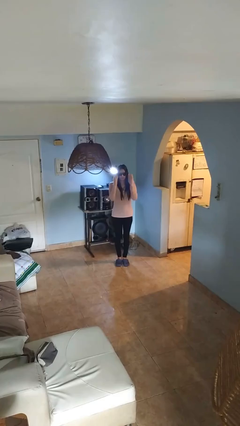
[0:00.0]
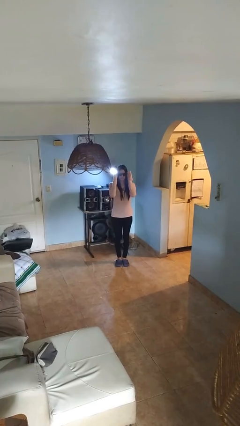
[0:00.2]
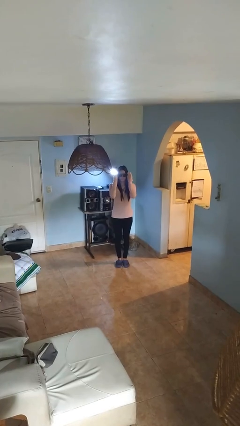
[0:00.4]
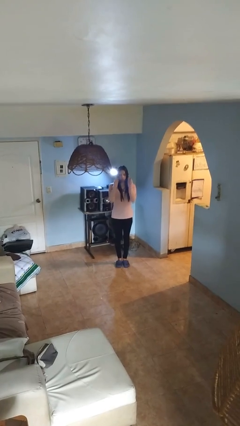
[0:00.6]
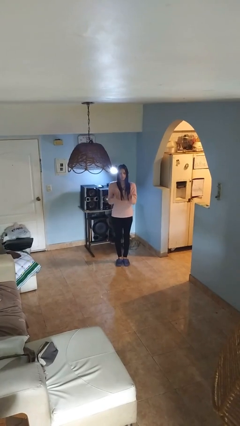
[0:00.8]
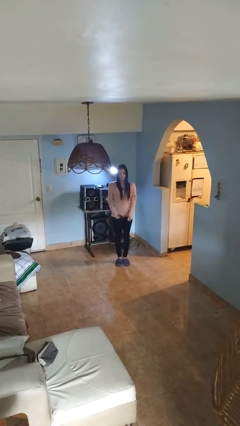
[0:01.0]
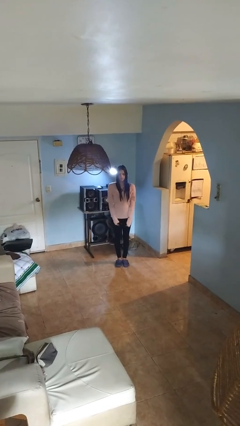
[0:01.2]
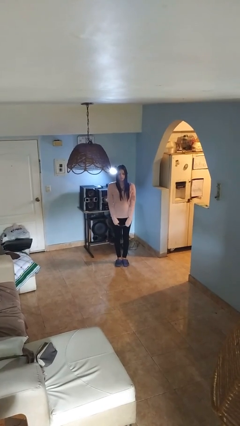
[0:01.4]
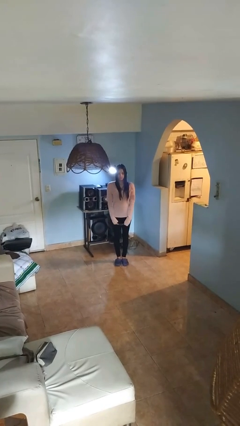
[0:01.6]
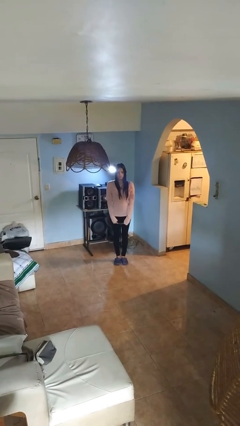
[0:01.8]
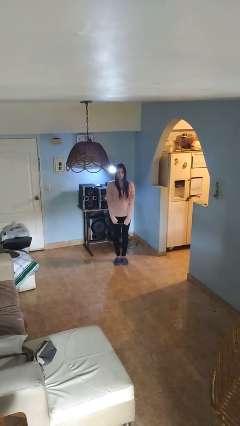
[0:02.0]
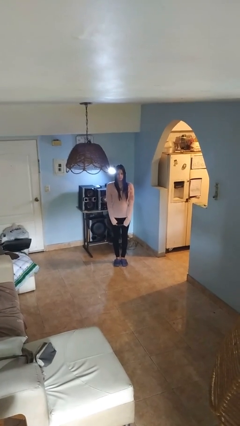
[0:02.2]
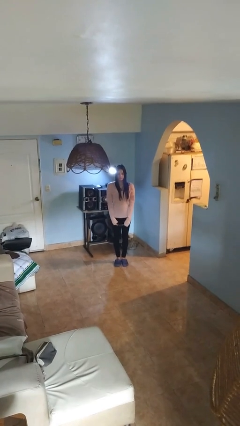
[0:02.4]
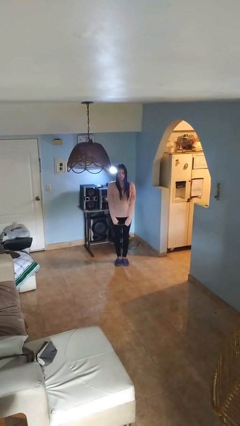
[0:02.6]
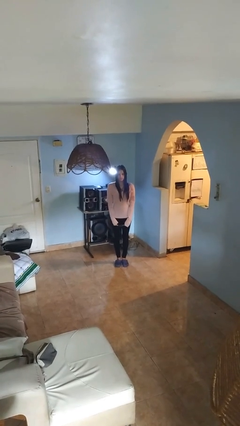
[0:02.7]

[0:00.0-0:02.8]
person takes off sunglasses

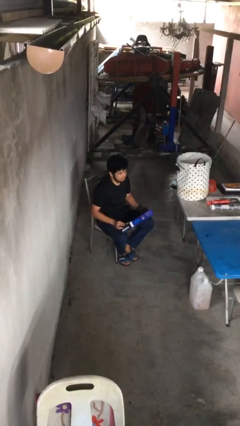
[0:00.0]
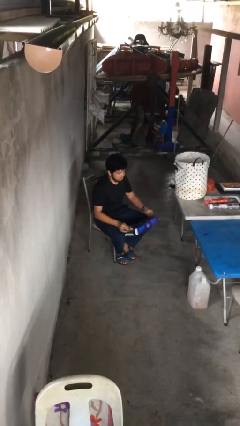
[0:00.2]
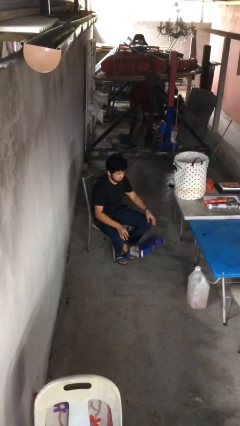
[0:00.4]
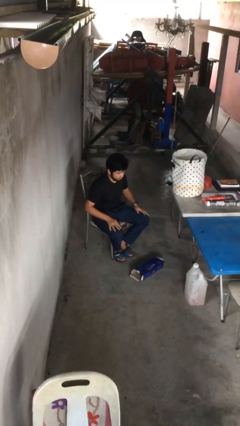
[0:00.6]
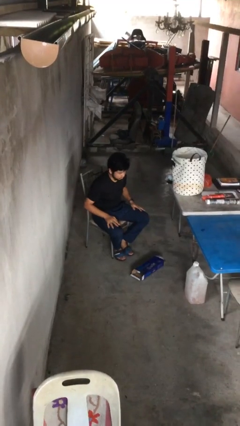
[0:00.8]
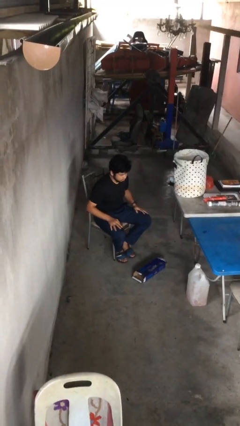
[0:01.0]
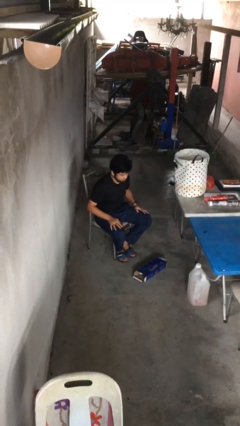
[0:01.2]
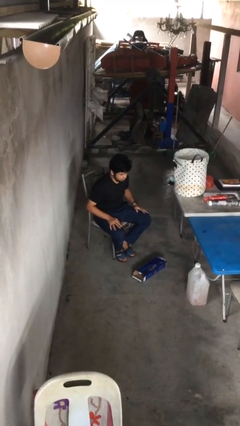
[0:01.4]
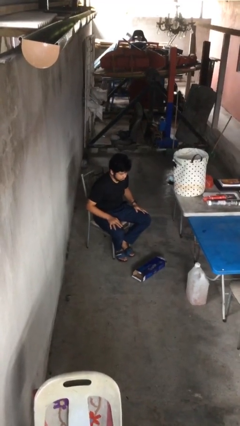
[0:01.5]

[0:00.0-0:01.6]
person drops object

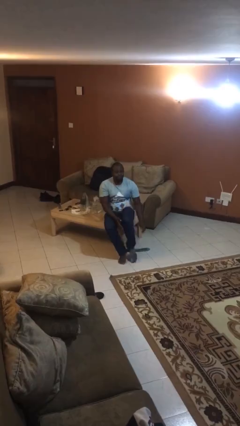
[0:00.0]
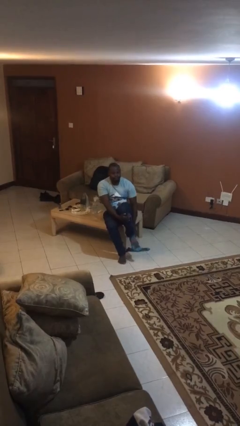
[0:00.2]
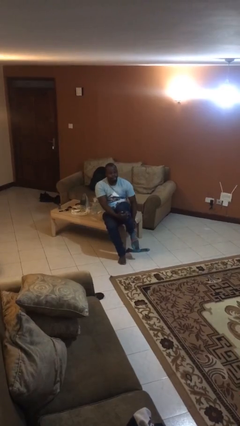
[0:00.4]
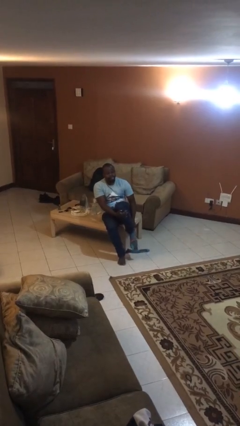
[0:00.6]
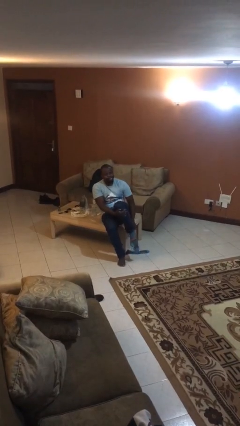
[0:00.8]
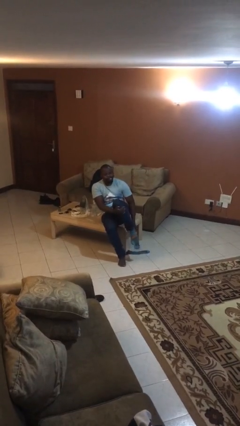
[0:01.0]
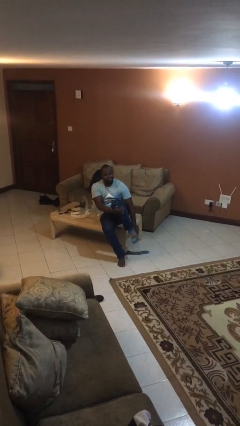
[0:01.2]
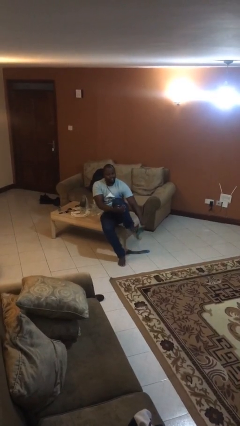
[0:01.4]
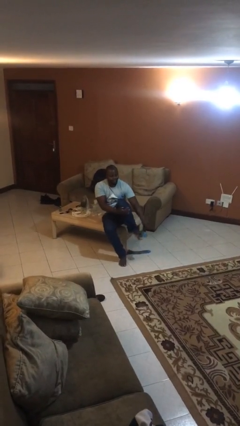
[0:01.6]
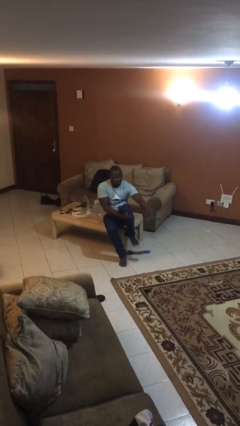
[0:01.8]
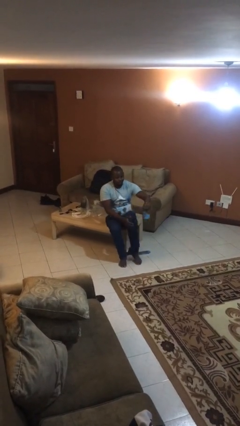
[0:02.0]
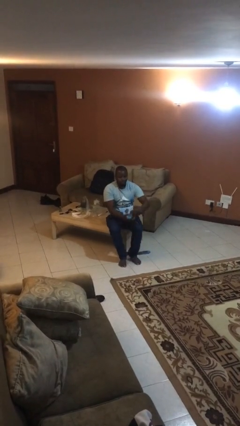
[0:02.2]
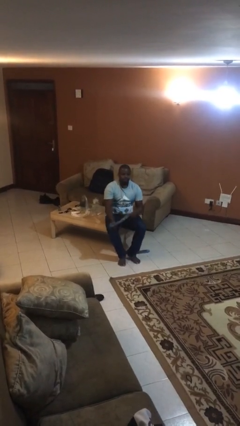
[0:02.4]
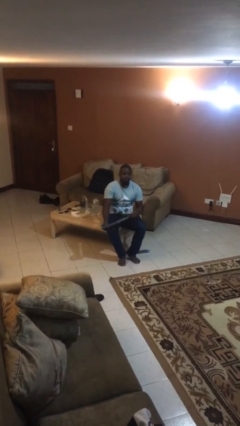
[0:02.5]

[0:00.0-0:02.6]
person takes off socks

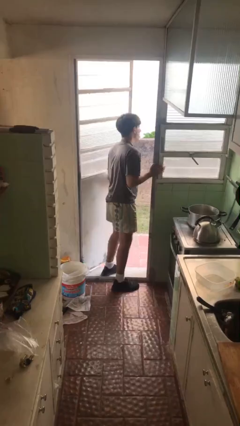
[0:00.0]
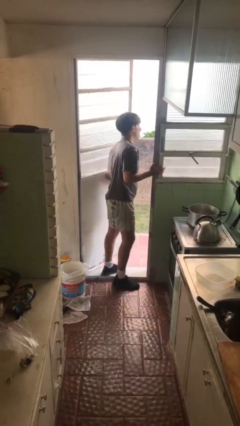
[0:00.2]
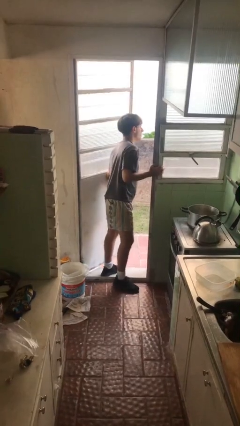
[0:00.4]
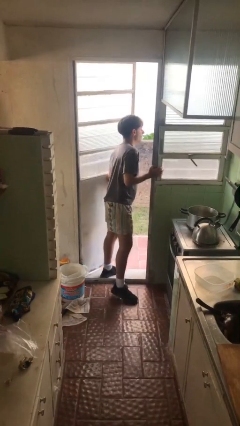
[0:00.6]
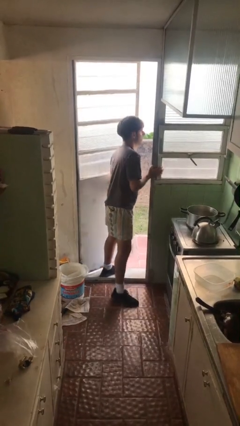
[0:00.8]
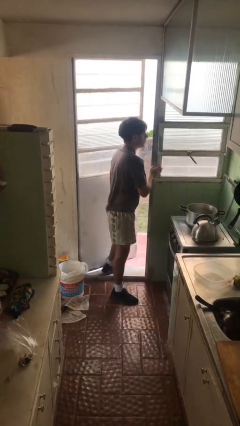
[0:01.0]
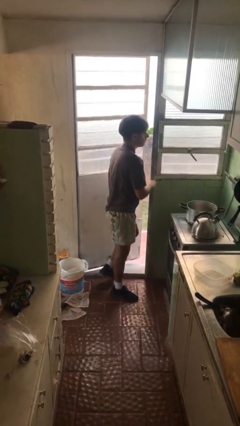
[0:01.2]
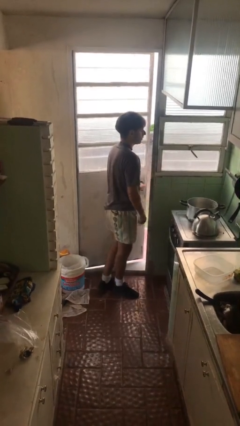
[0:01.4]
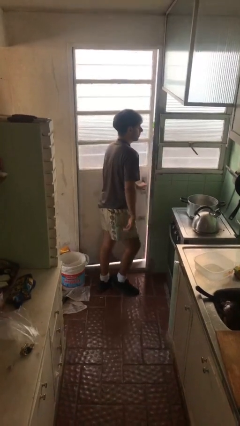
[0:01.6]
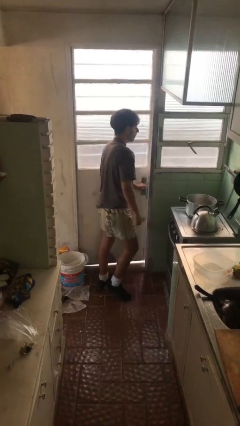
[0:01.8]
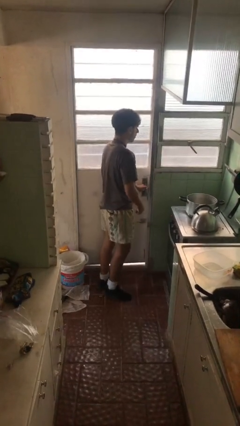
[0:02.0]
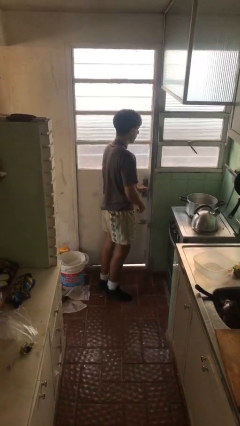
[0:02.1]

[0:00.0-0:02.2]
person closes facility door

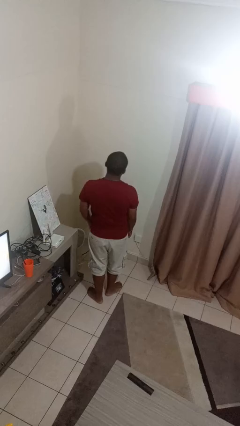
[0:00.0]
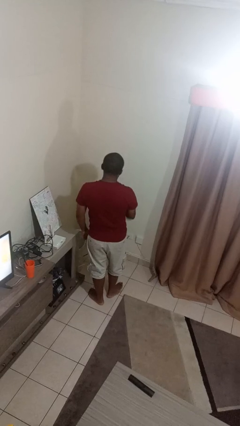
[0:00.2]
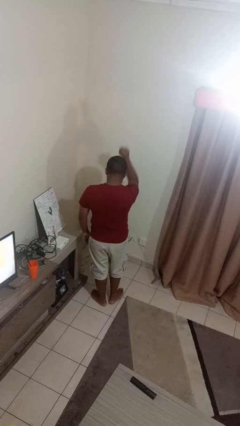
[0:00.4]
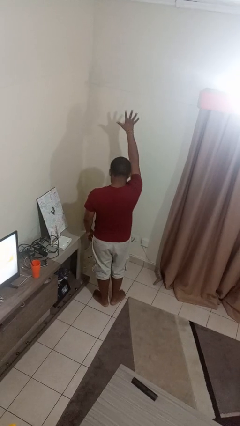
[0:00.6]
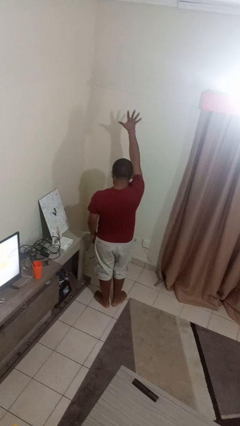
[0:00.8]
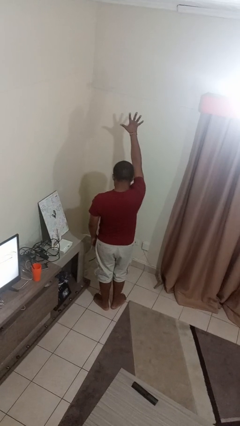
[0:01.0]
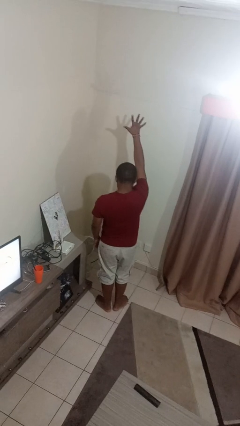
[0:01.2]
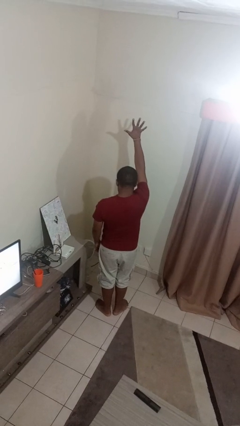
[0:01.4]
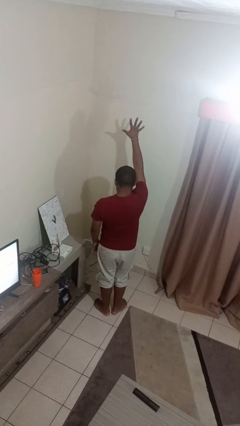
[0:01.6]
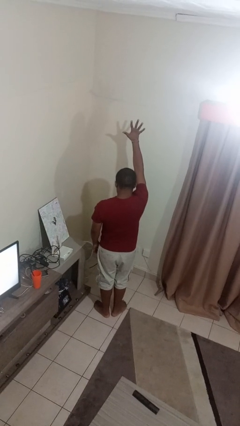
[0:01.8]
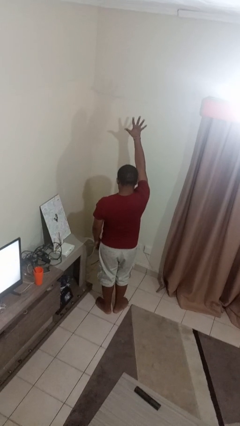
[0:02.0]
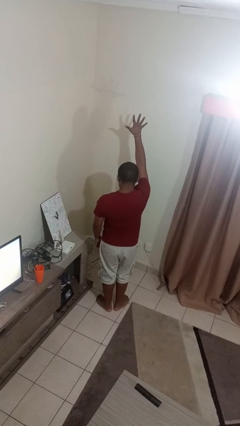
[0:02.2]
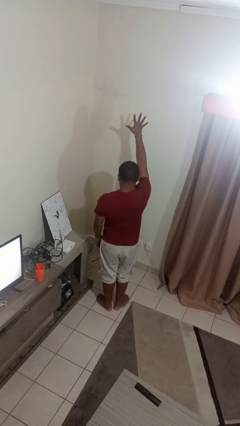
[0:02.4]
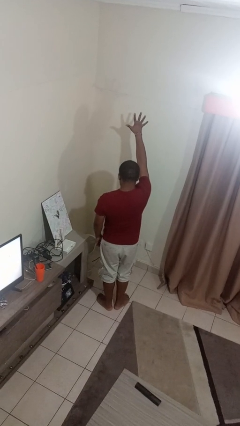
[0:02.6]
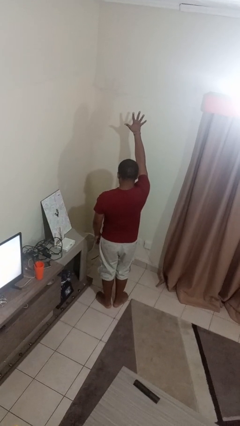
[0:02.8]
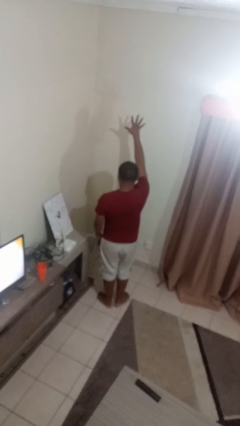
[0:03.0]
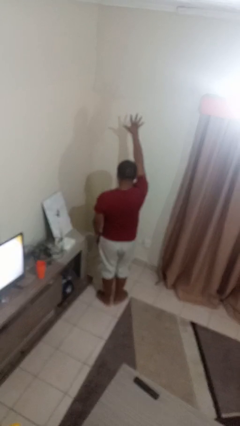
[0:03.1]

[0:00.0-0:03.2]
person gestures number five

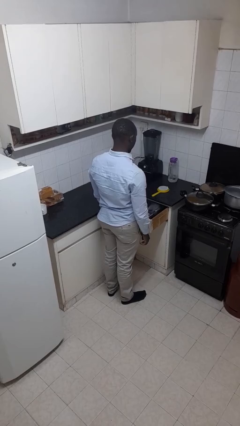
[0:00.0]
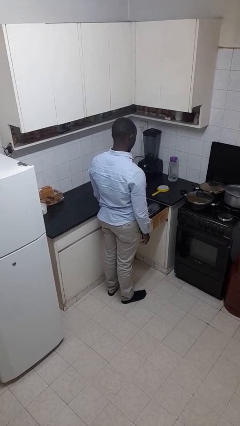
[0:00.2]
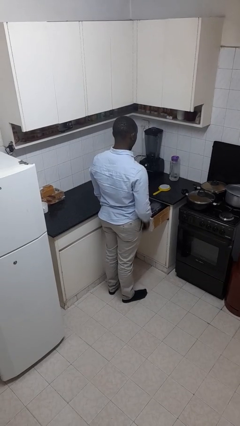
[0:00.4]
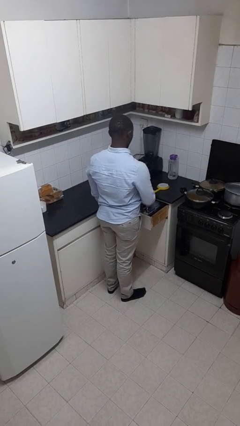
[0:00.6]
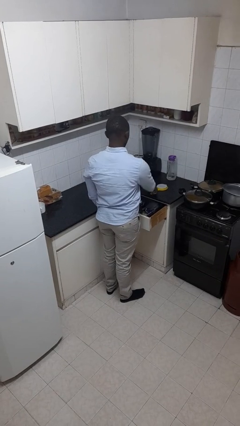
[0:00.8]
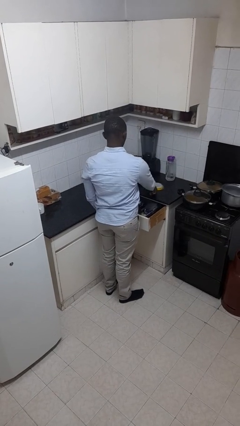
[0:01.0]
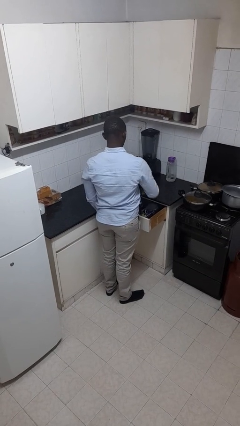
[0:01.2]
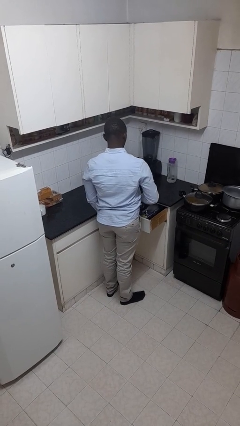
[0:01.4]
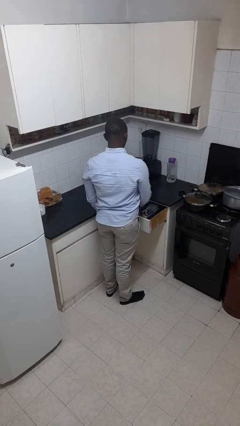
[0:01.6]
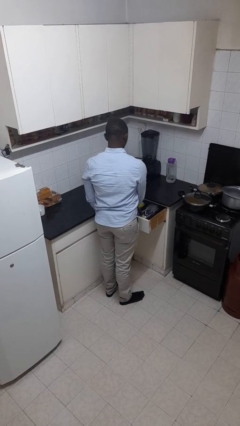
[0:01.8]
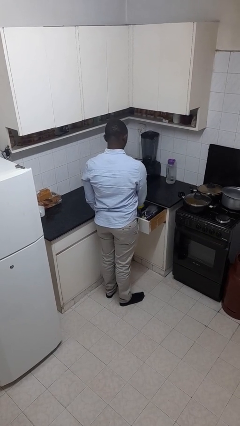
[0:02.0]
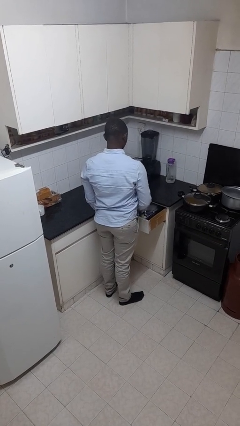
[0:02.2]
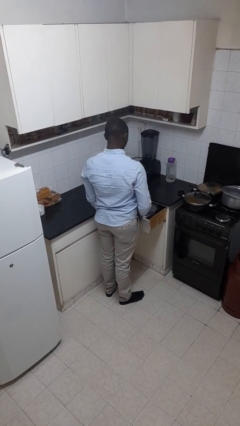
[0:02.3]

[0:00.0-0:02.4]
person puts object into kitchen drawer

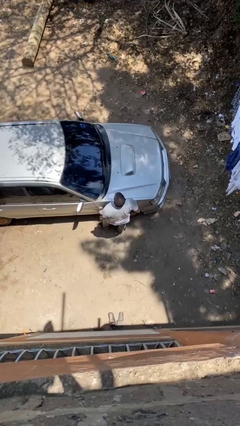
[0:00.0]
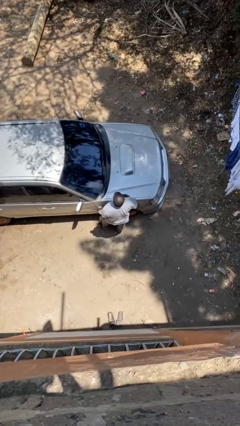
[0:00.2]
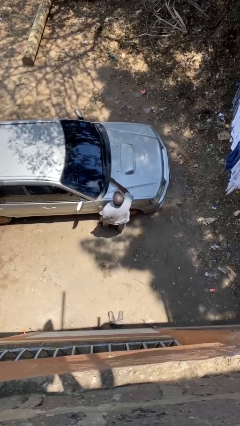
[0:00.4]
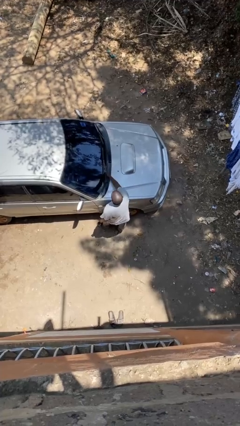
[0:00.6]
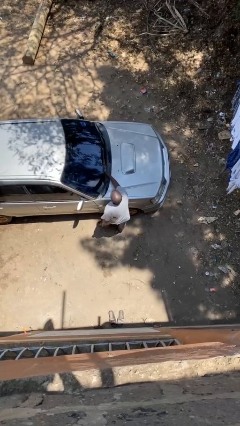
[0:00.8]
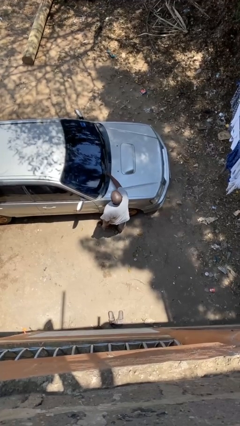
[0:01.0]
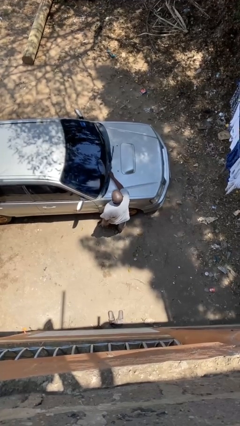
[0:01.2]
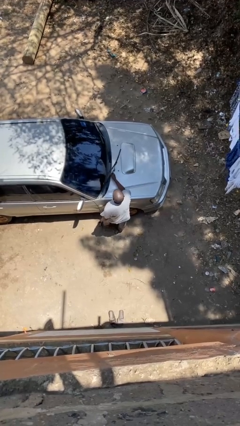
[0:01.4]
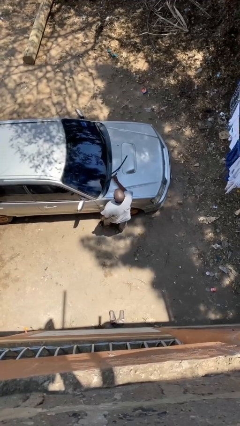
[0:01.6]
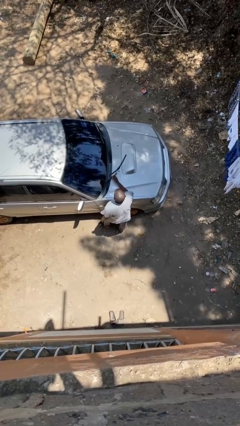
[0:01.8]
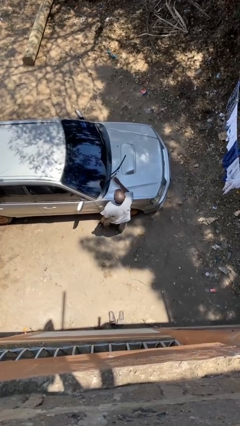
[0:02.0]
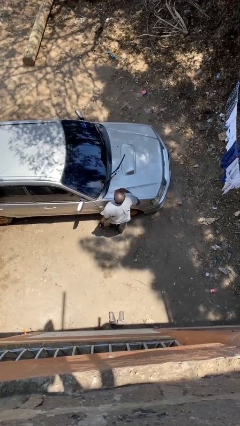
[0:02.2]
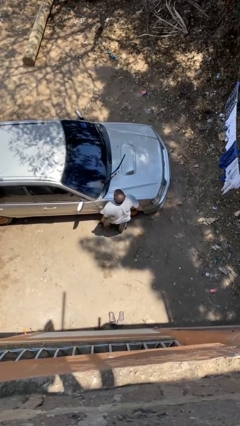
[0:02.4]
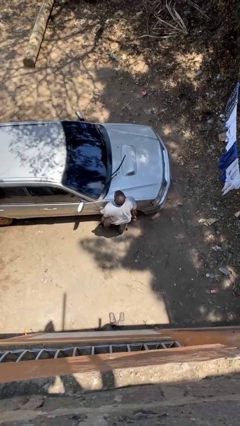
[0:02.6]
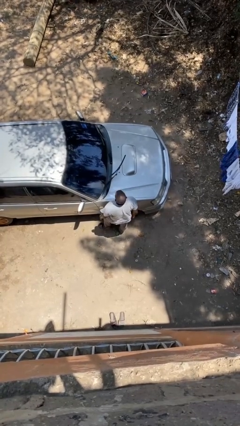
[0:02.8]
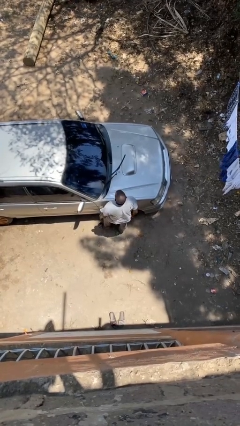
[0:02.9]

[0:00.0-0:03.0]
person flips up car wipers
